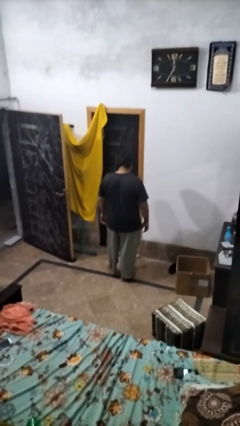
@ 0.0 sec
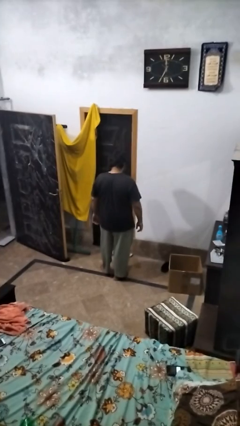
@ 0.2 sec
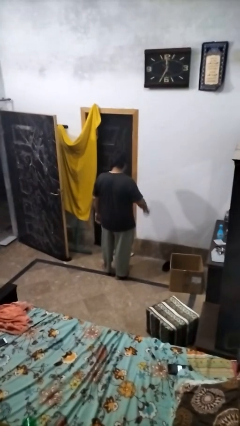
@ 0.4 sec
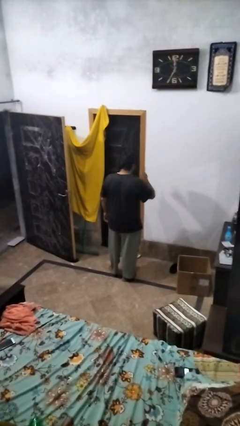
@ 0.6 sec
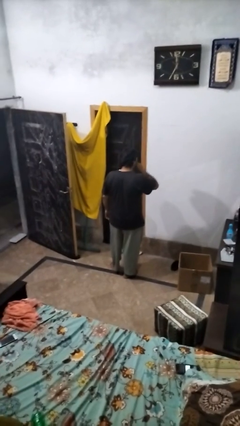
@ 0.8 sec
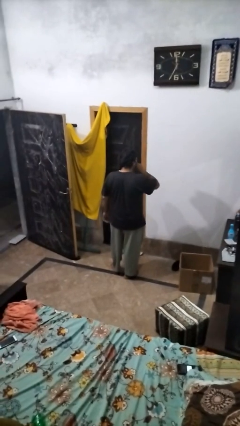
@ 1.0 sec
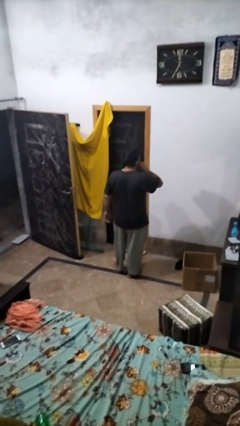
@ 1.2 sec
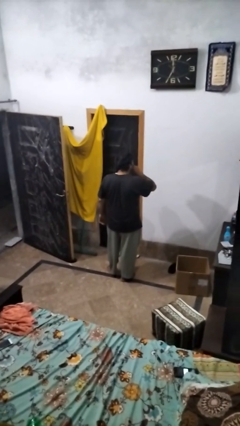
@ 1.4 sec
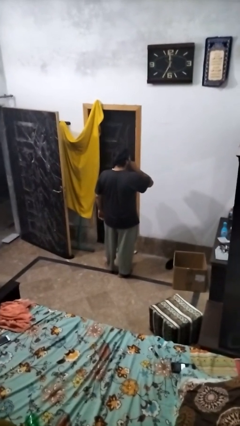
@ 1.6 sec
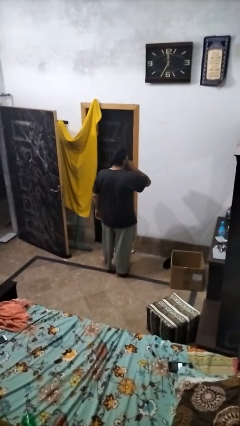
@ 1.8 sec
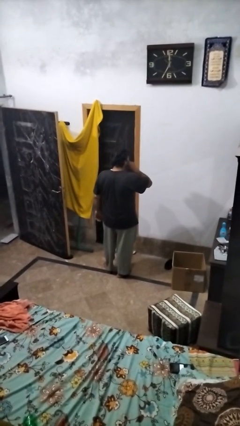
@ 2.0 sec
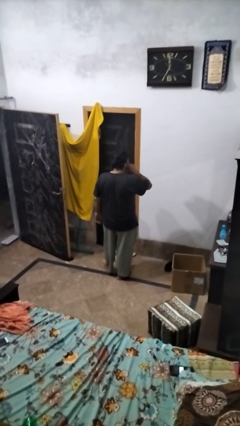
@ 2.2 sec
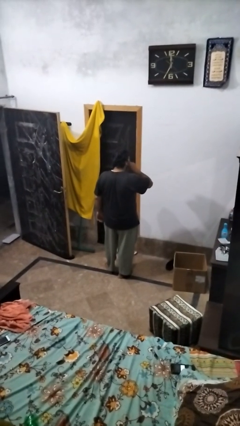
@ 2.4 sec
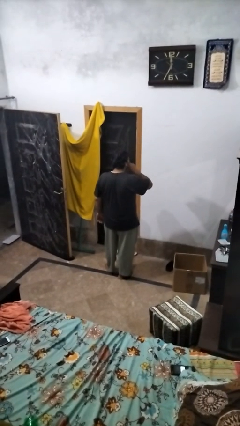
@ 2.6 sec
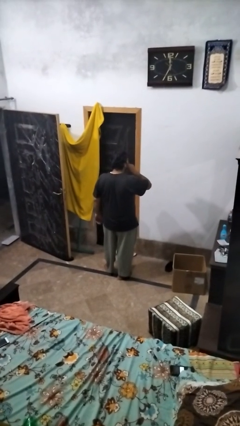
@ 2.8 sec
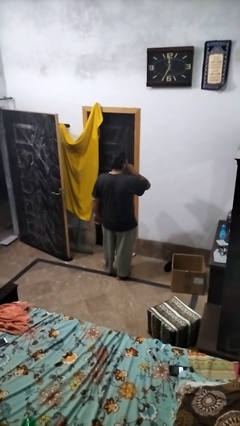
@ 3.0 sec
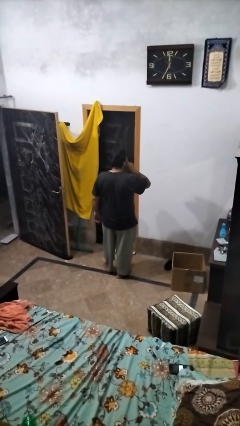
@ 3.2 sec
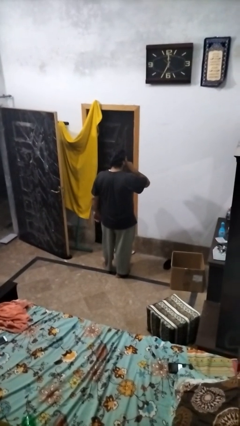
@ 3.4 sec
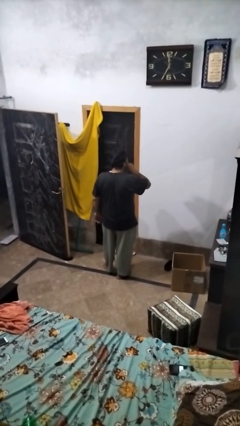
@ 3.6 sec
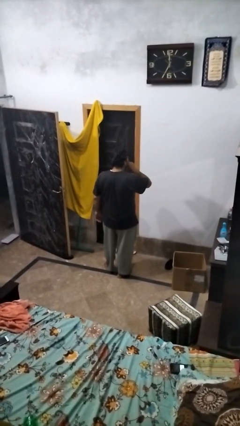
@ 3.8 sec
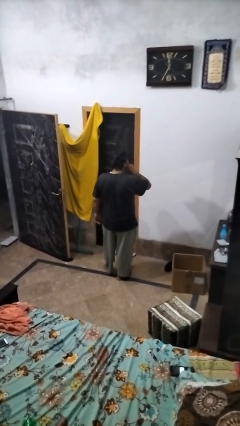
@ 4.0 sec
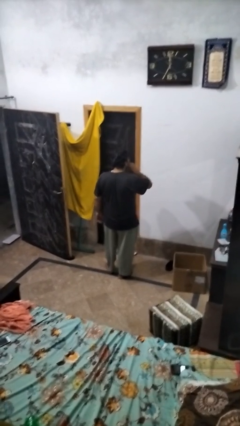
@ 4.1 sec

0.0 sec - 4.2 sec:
person gestures be quiet

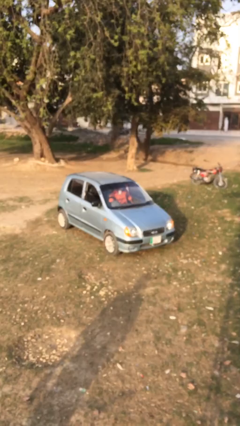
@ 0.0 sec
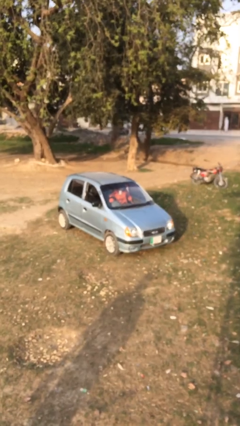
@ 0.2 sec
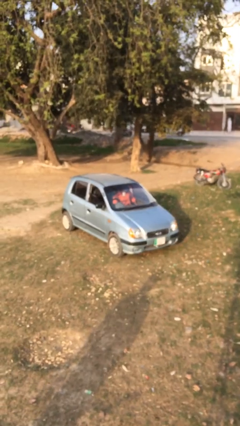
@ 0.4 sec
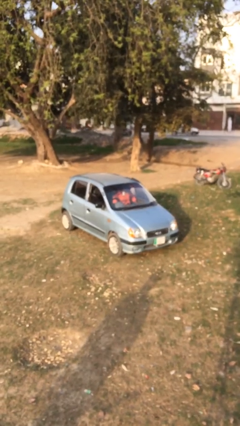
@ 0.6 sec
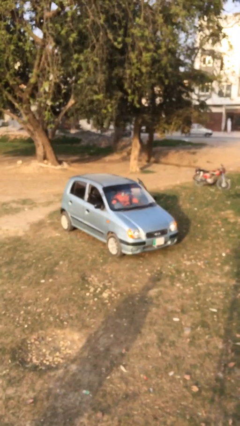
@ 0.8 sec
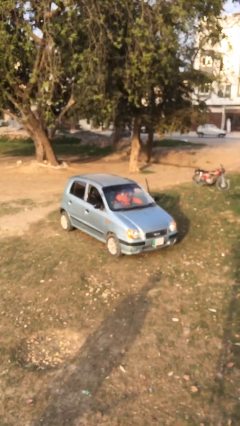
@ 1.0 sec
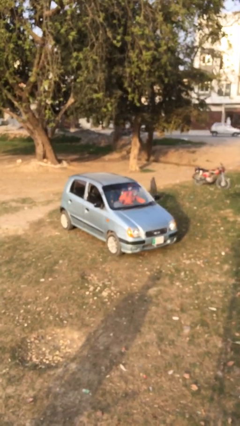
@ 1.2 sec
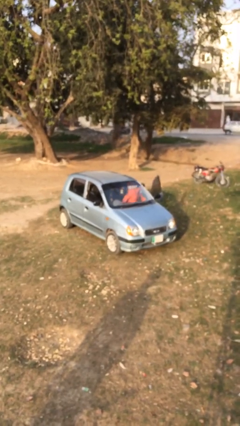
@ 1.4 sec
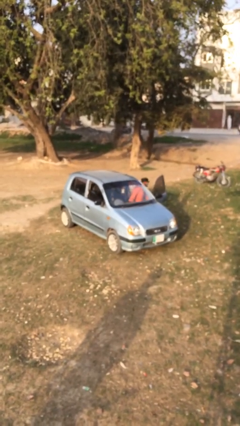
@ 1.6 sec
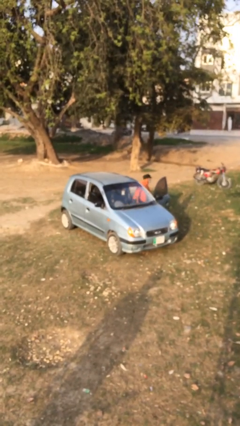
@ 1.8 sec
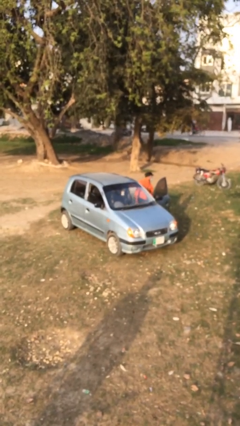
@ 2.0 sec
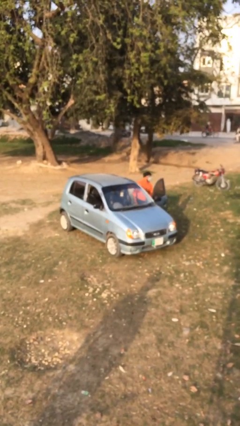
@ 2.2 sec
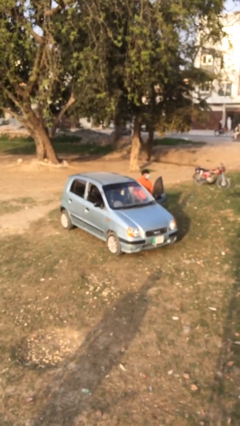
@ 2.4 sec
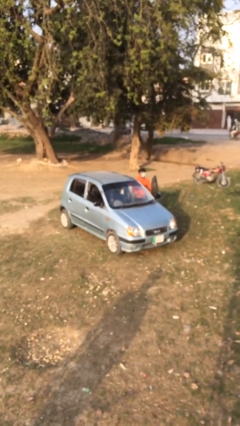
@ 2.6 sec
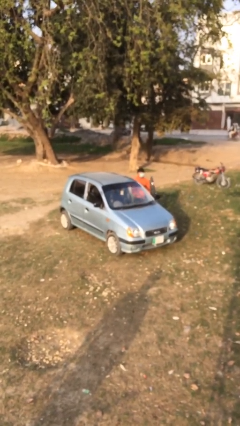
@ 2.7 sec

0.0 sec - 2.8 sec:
car drops off person

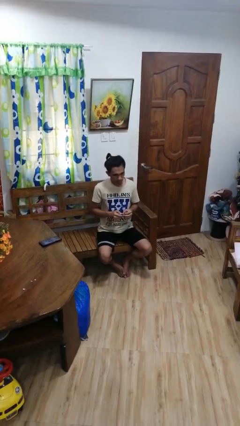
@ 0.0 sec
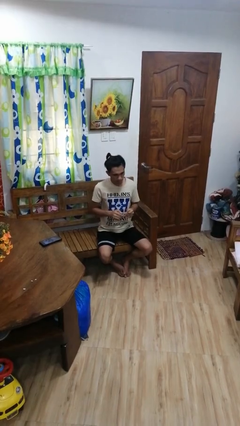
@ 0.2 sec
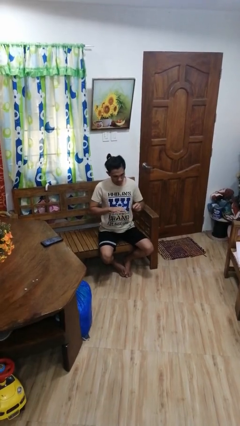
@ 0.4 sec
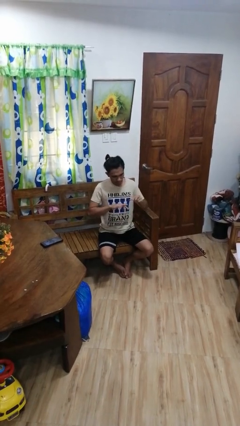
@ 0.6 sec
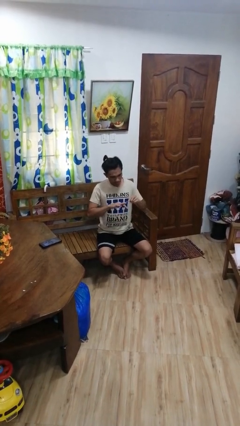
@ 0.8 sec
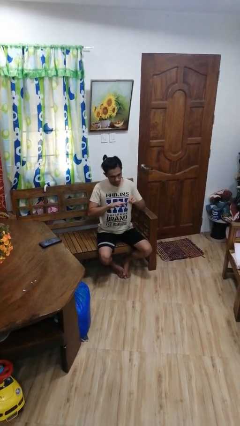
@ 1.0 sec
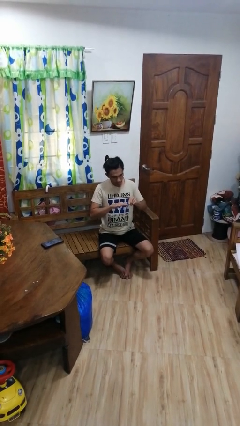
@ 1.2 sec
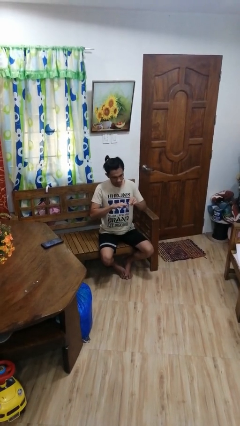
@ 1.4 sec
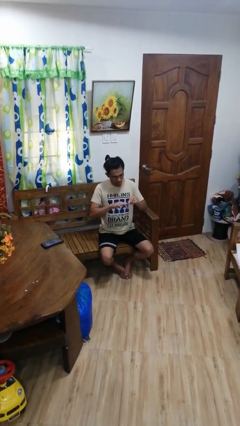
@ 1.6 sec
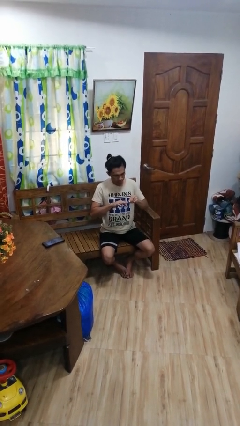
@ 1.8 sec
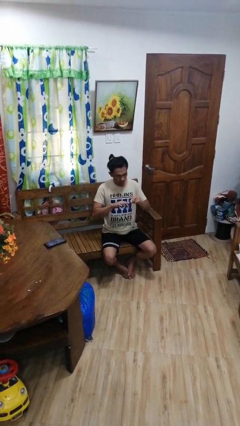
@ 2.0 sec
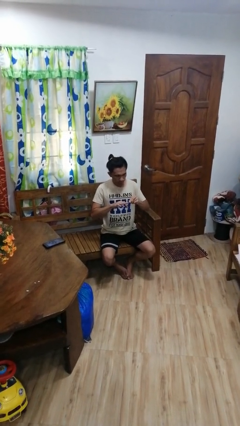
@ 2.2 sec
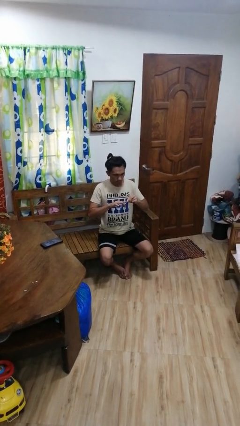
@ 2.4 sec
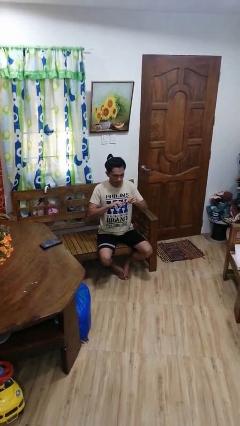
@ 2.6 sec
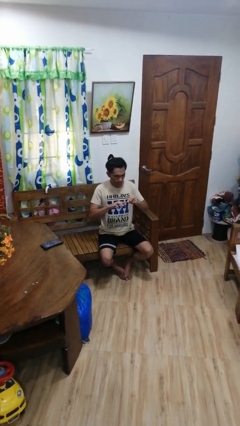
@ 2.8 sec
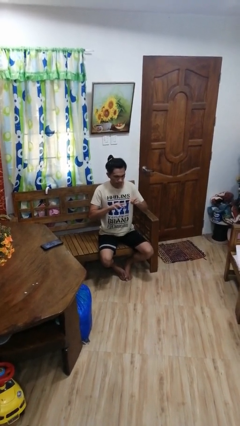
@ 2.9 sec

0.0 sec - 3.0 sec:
person files fingernails

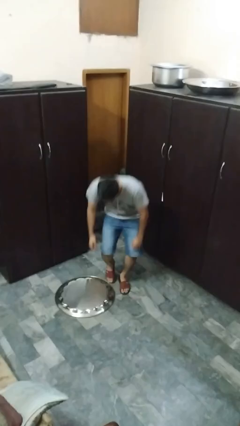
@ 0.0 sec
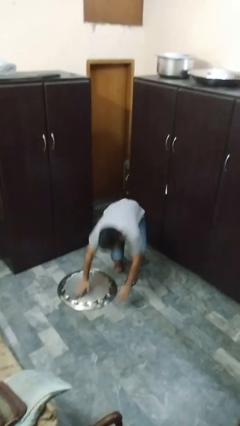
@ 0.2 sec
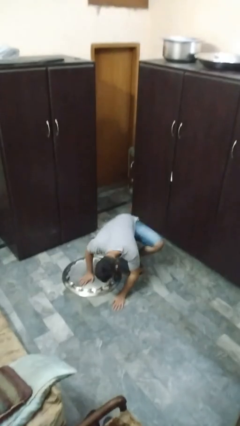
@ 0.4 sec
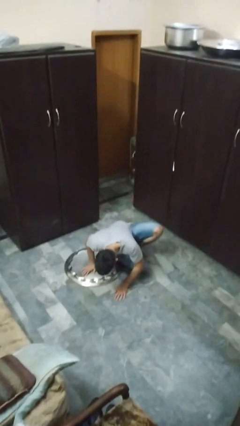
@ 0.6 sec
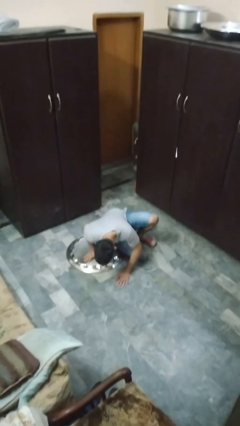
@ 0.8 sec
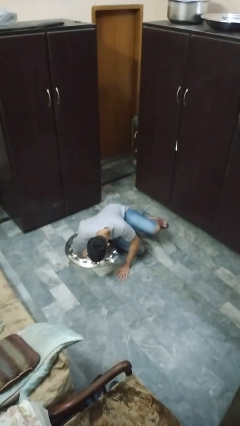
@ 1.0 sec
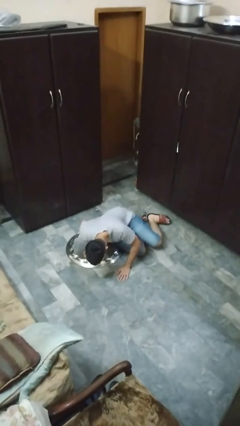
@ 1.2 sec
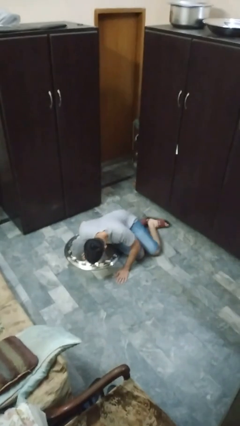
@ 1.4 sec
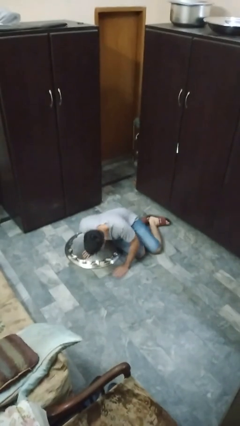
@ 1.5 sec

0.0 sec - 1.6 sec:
person trips on object on floor

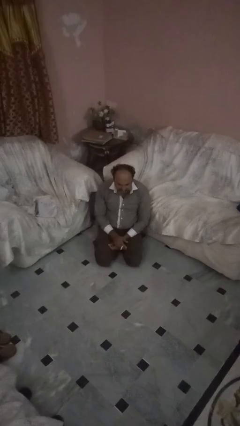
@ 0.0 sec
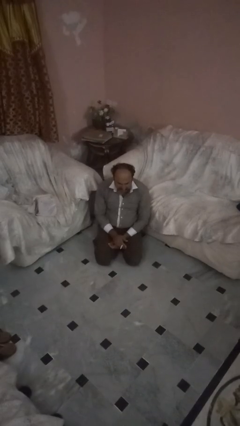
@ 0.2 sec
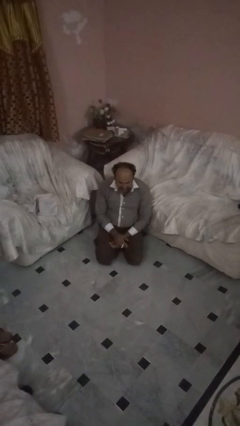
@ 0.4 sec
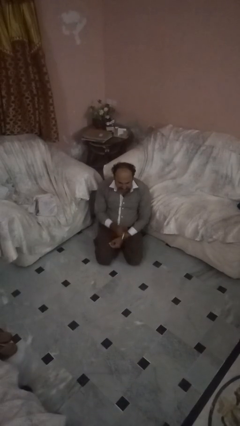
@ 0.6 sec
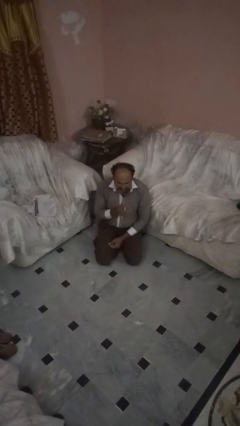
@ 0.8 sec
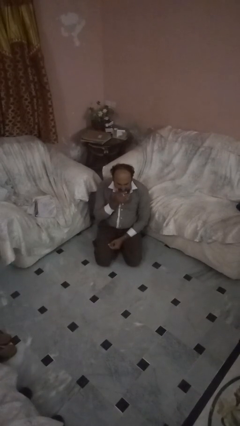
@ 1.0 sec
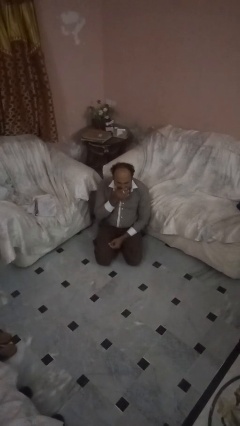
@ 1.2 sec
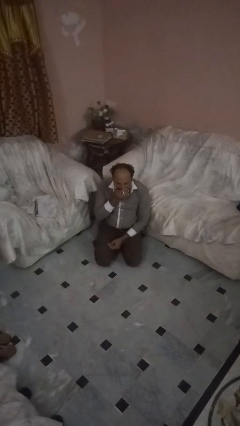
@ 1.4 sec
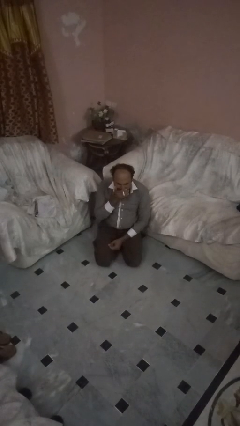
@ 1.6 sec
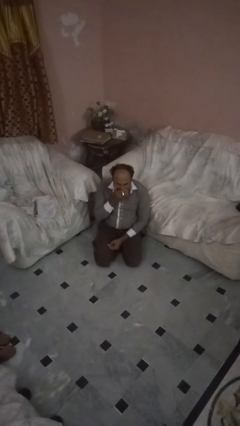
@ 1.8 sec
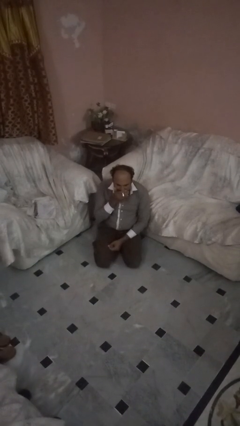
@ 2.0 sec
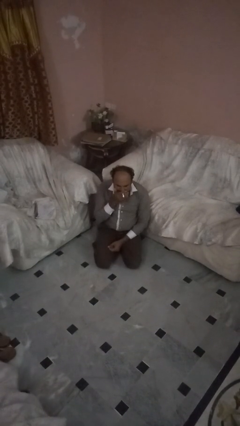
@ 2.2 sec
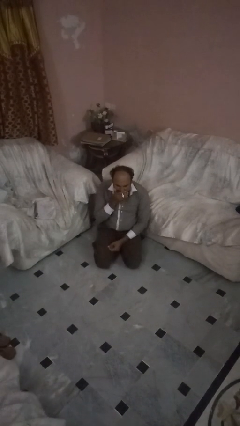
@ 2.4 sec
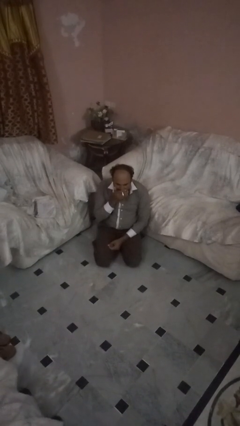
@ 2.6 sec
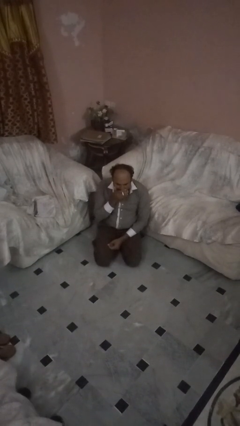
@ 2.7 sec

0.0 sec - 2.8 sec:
person vapes

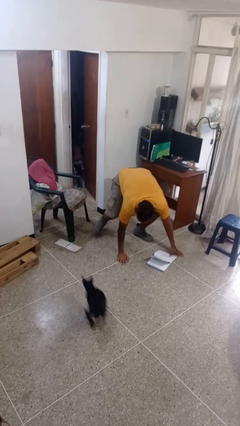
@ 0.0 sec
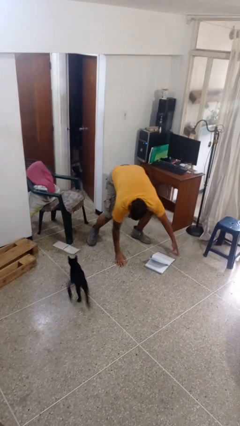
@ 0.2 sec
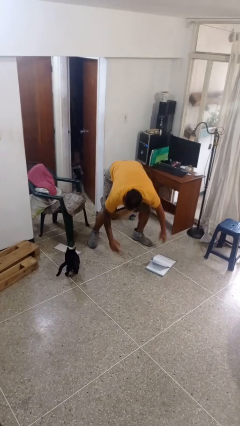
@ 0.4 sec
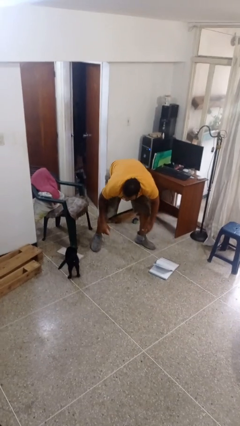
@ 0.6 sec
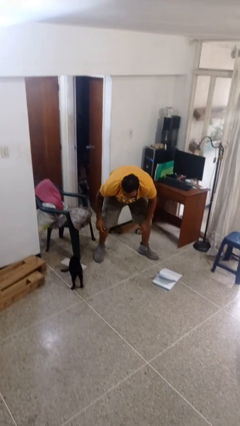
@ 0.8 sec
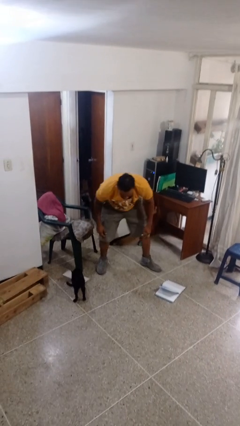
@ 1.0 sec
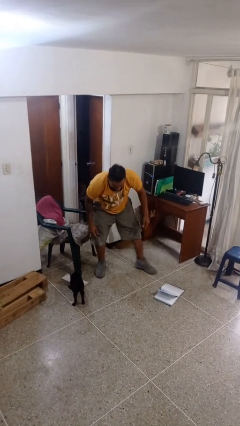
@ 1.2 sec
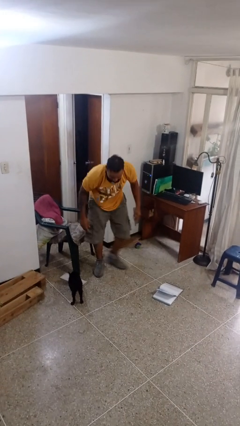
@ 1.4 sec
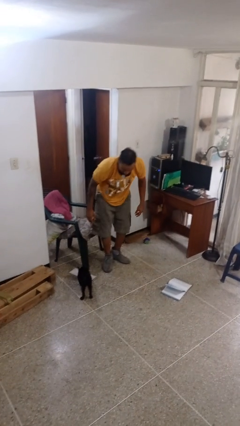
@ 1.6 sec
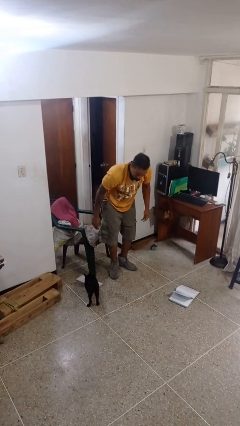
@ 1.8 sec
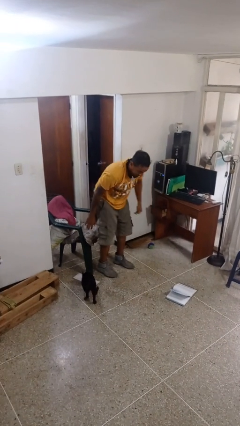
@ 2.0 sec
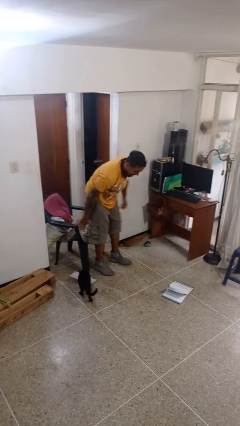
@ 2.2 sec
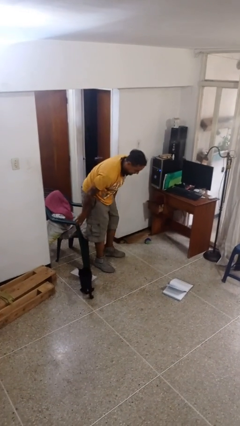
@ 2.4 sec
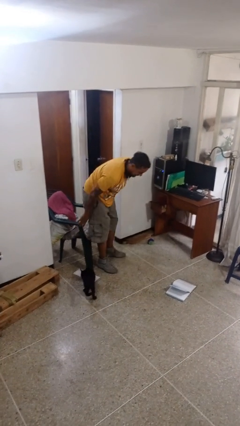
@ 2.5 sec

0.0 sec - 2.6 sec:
person stands up from floor

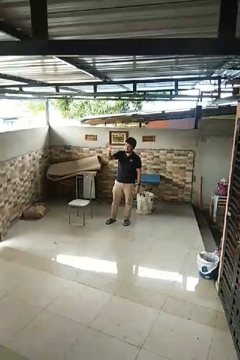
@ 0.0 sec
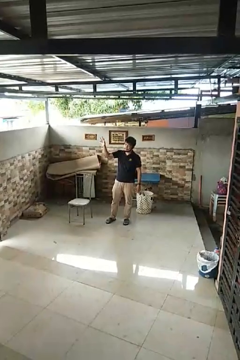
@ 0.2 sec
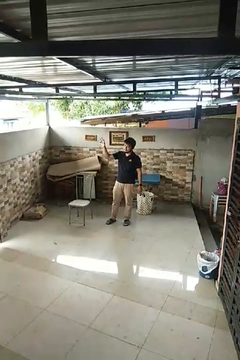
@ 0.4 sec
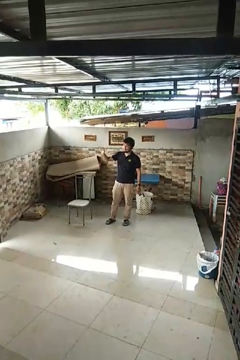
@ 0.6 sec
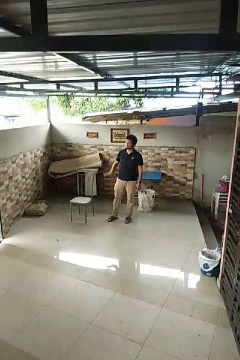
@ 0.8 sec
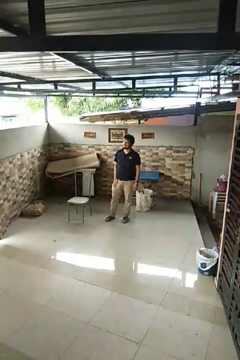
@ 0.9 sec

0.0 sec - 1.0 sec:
person gestures swipe right
